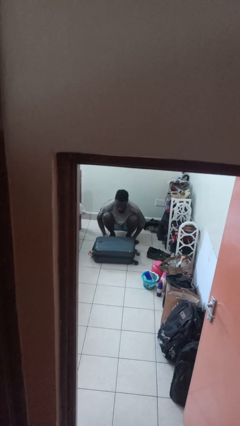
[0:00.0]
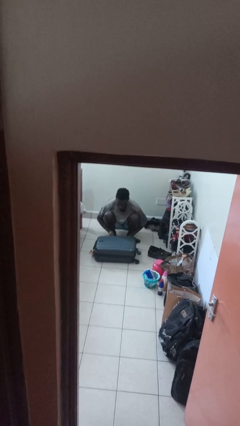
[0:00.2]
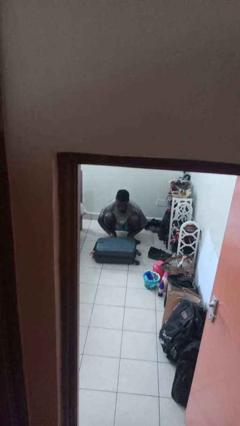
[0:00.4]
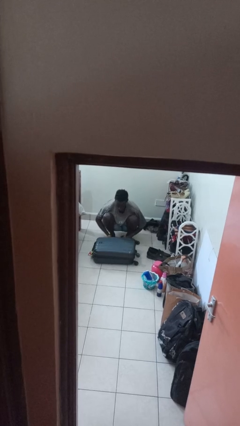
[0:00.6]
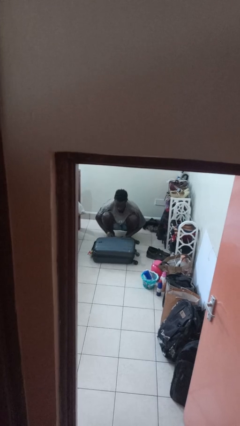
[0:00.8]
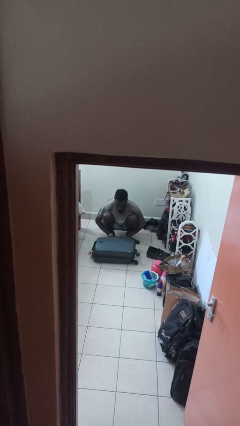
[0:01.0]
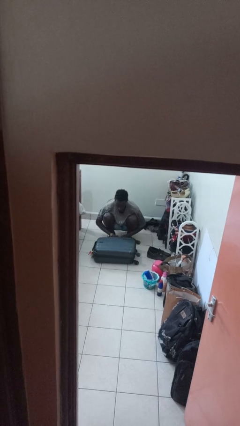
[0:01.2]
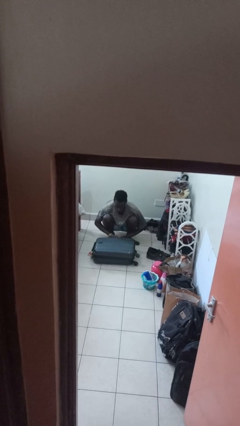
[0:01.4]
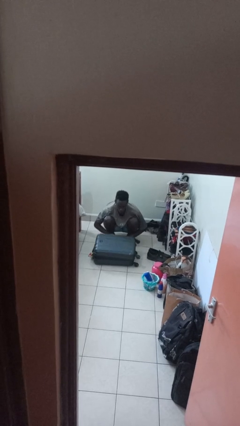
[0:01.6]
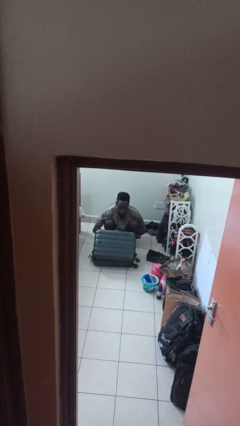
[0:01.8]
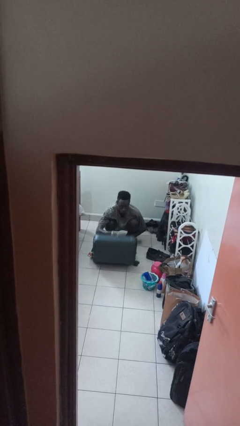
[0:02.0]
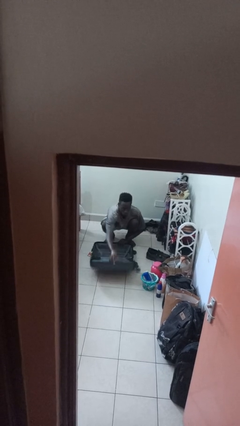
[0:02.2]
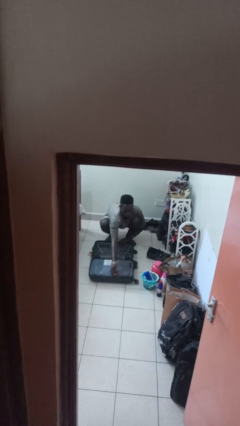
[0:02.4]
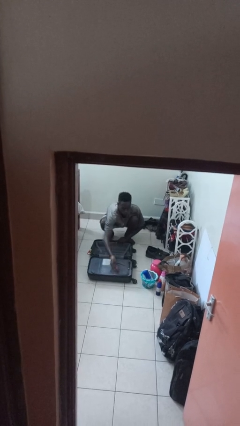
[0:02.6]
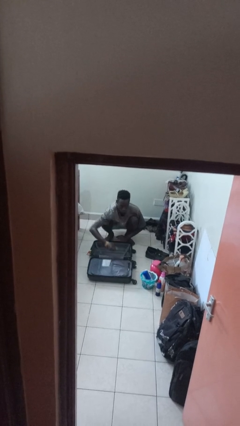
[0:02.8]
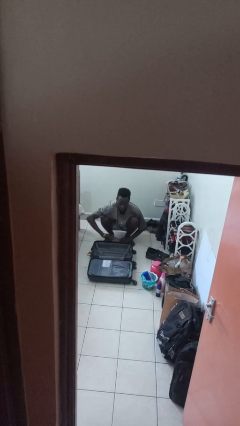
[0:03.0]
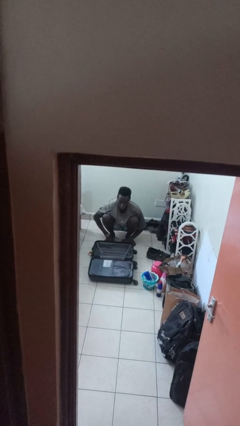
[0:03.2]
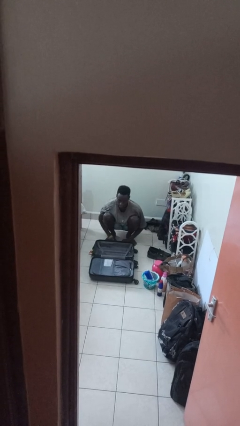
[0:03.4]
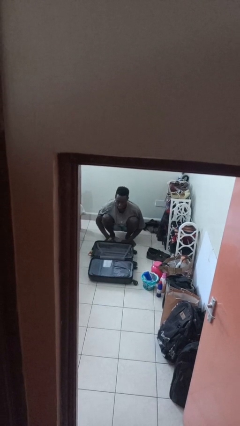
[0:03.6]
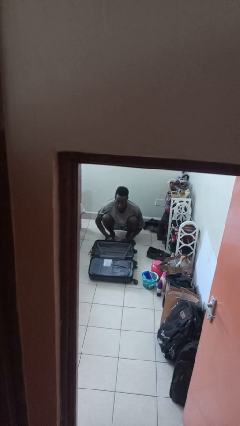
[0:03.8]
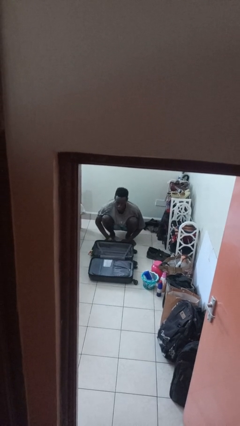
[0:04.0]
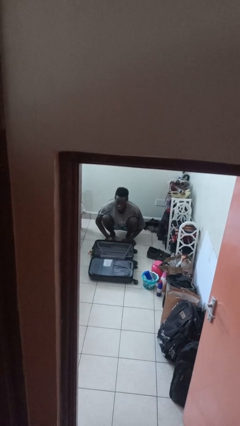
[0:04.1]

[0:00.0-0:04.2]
person opens suitcase

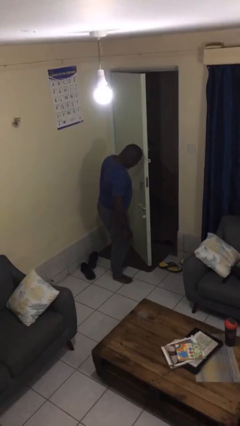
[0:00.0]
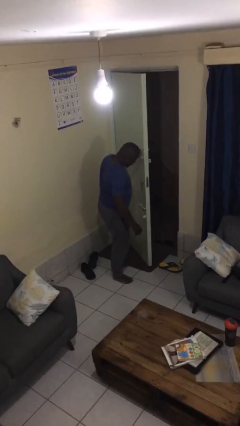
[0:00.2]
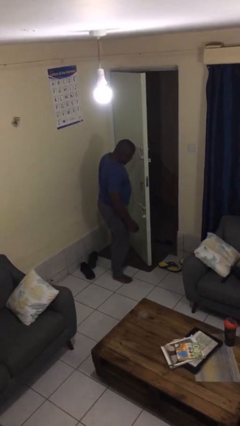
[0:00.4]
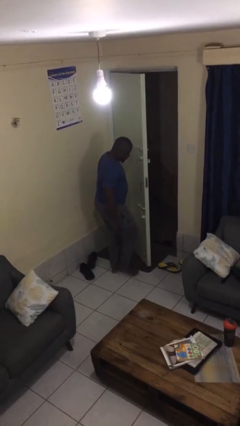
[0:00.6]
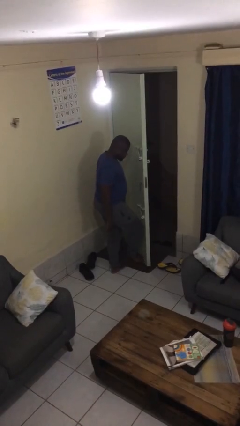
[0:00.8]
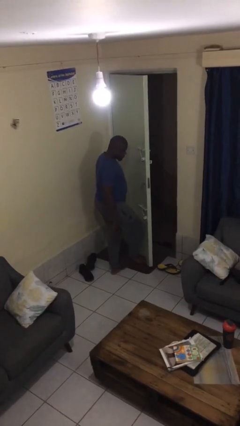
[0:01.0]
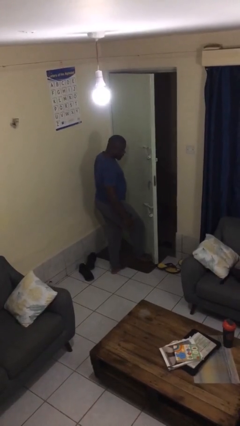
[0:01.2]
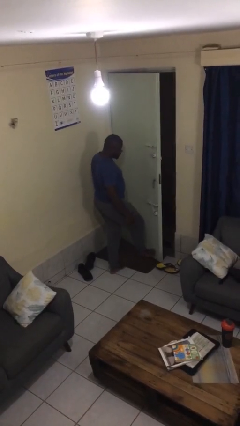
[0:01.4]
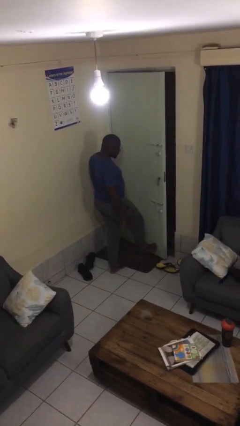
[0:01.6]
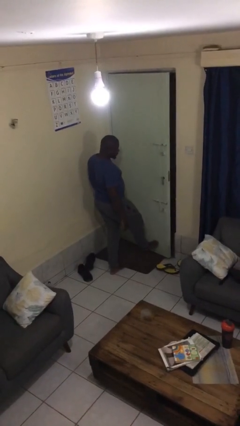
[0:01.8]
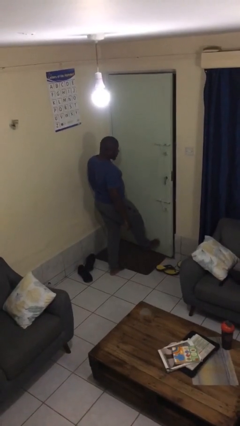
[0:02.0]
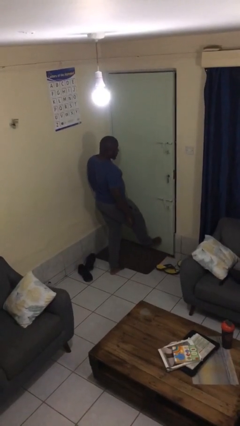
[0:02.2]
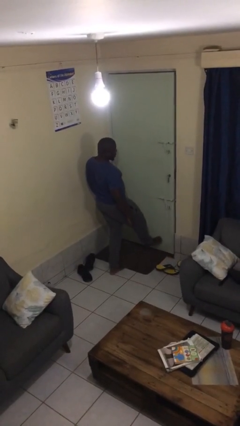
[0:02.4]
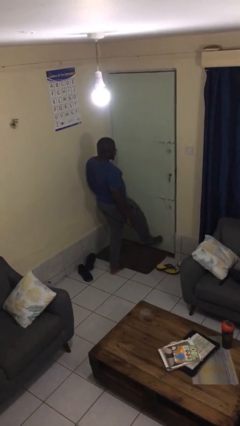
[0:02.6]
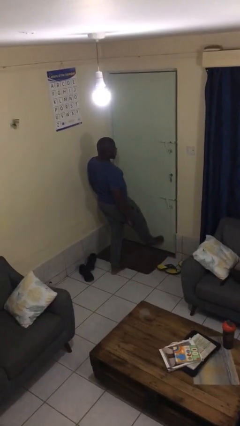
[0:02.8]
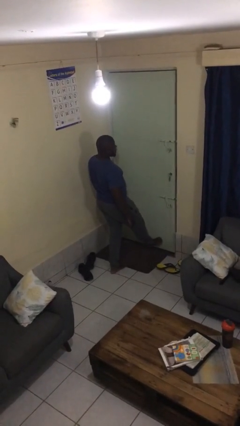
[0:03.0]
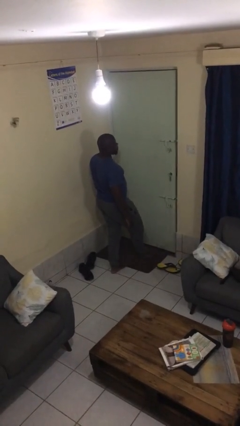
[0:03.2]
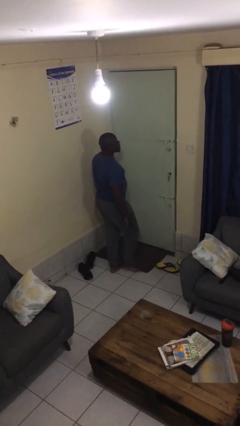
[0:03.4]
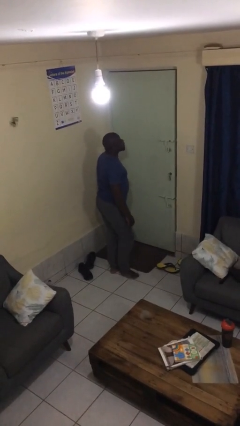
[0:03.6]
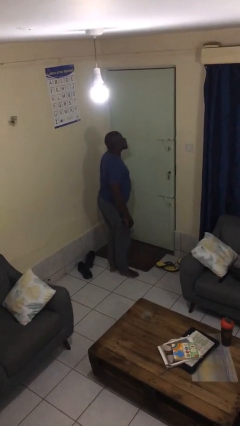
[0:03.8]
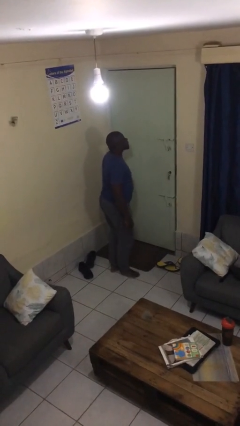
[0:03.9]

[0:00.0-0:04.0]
person closes door with foot

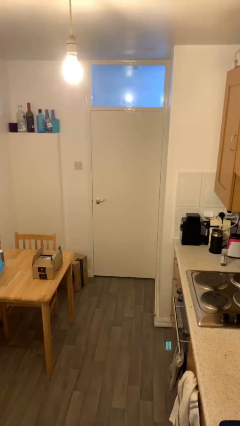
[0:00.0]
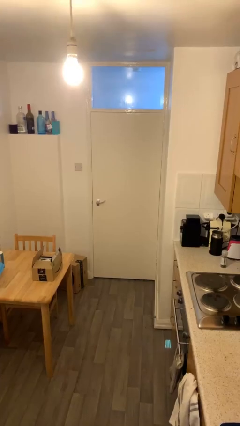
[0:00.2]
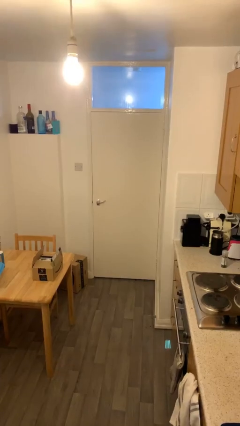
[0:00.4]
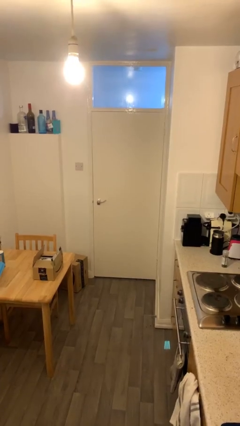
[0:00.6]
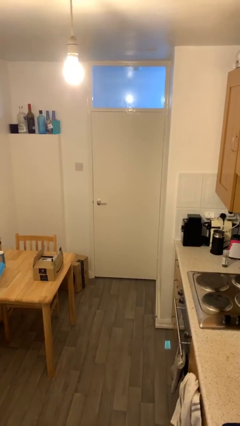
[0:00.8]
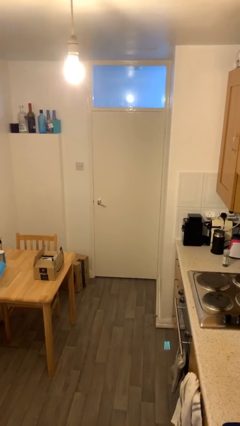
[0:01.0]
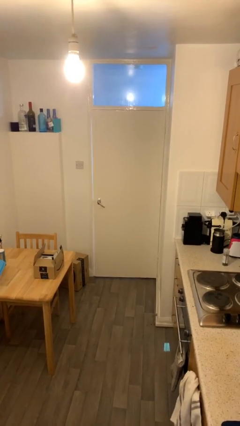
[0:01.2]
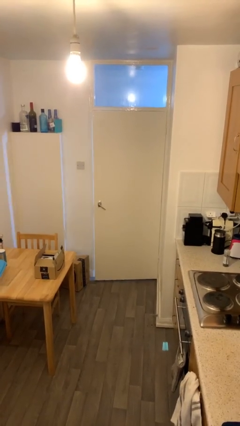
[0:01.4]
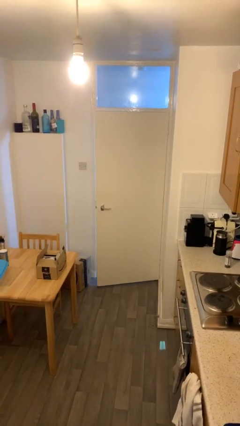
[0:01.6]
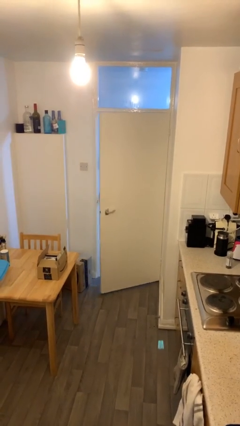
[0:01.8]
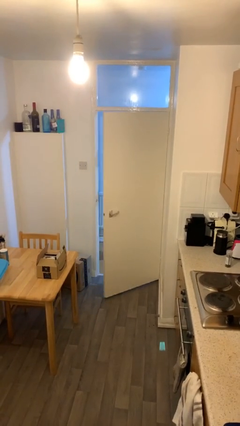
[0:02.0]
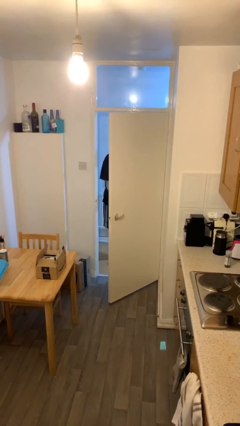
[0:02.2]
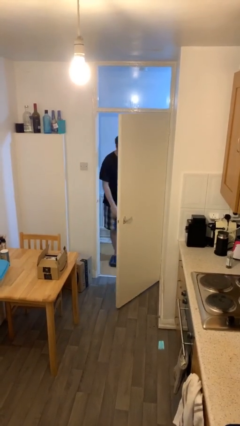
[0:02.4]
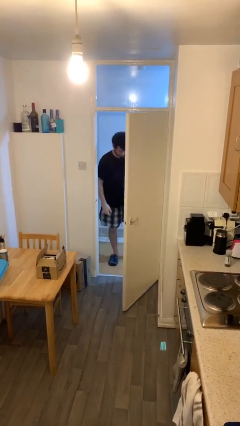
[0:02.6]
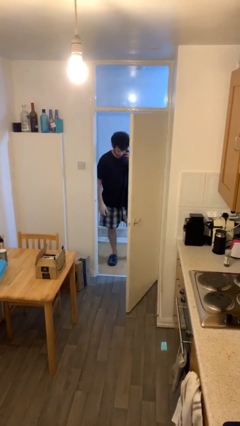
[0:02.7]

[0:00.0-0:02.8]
person opens facility door

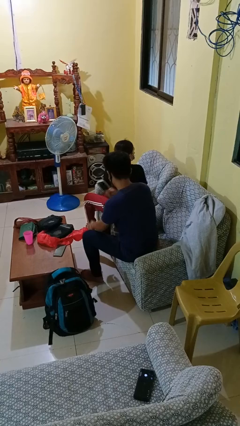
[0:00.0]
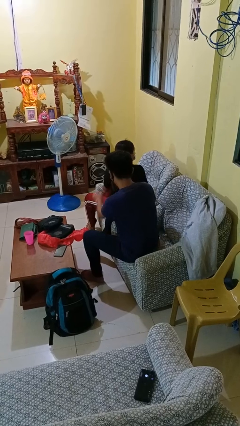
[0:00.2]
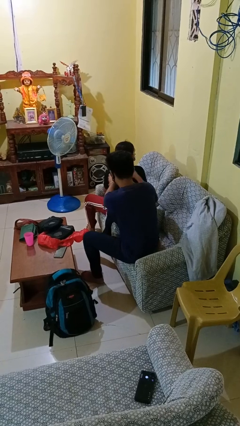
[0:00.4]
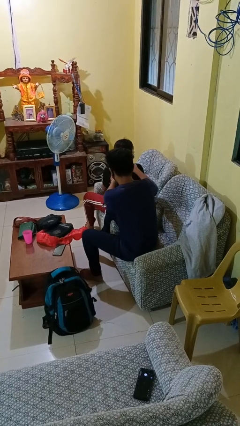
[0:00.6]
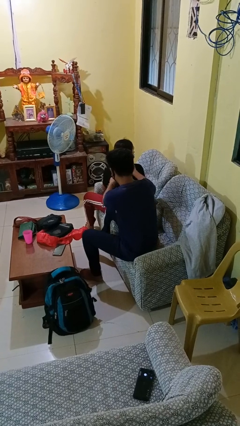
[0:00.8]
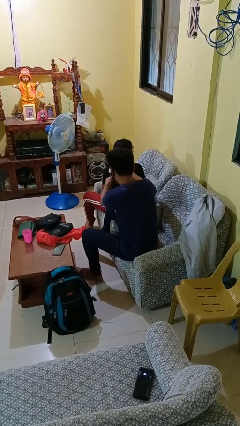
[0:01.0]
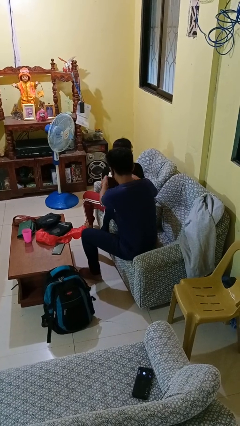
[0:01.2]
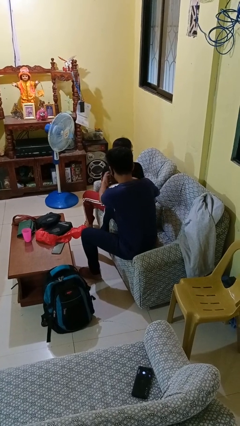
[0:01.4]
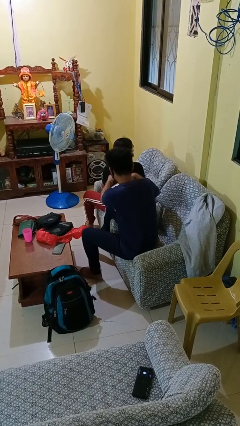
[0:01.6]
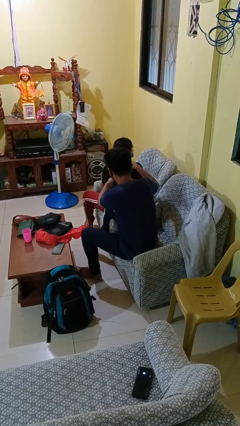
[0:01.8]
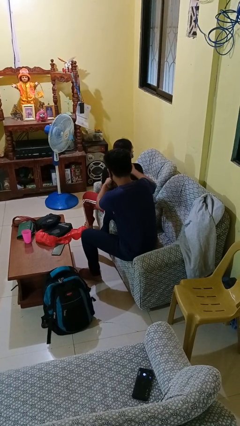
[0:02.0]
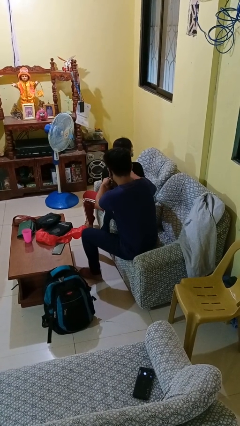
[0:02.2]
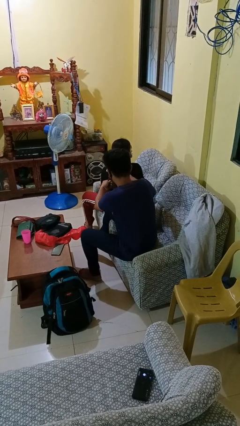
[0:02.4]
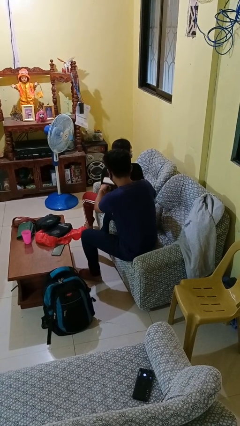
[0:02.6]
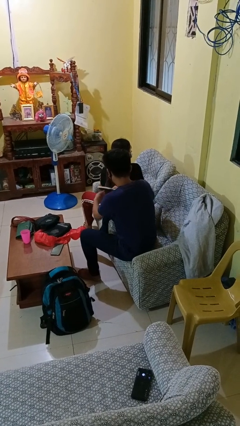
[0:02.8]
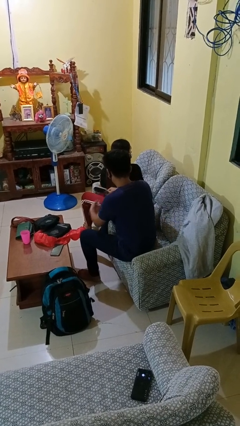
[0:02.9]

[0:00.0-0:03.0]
person brushes hair of person

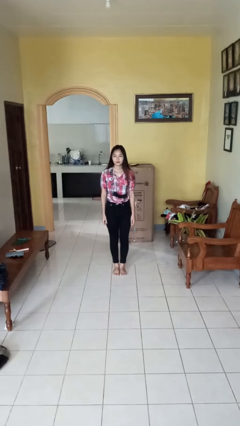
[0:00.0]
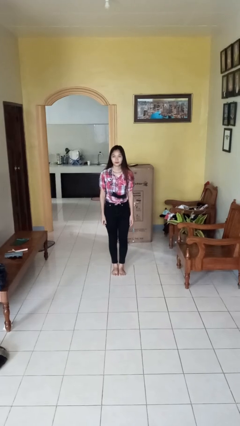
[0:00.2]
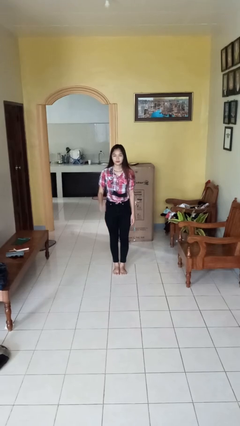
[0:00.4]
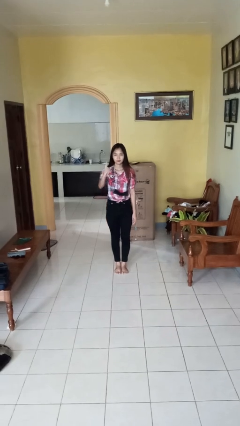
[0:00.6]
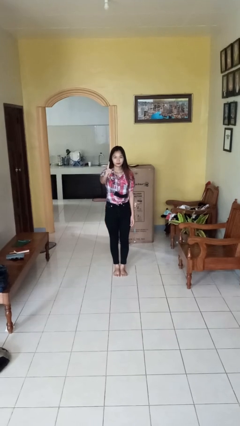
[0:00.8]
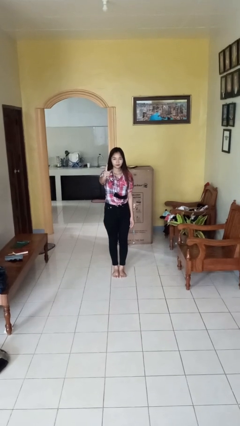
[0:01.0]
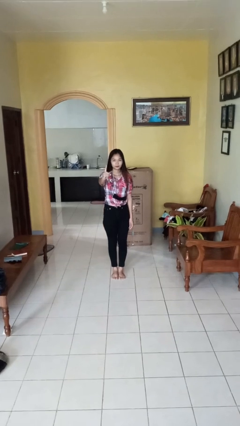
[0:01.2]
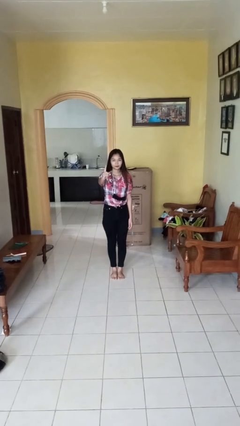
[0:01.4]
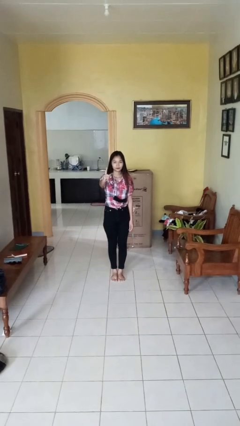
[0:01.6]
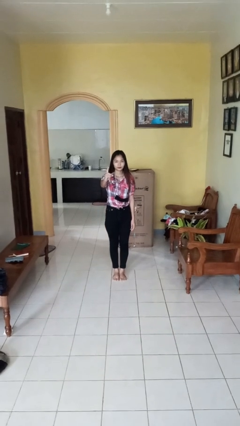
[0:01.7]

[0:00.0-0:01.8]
person gestures number one

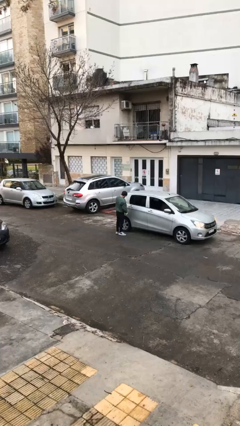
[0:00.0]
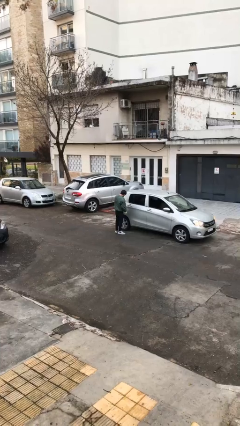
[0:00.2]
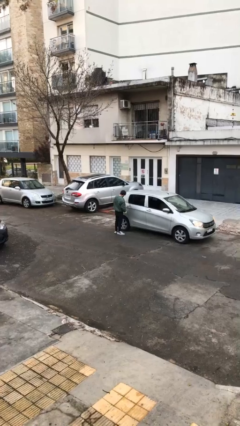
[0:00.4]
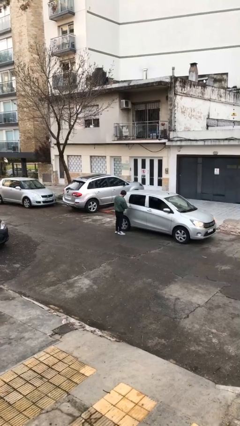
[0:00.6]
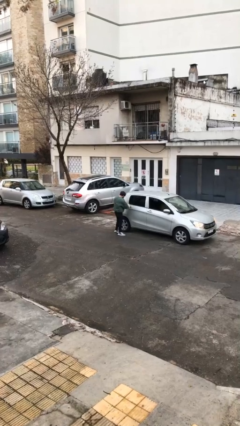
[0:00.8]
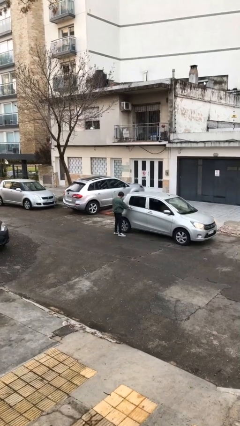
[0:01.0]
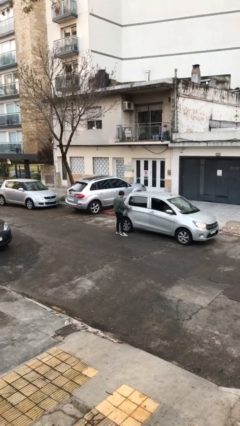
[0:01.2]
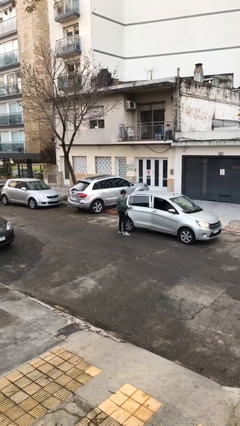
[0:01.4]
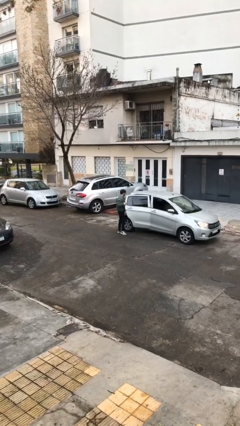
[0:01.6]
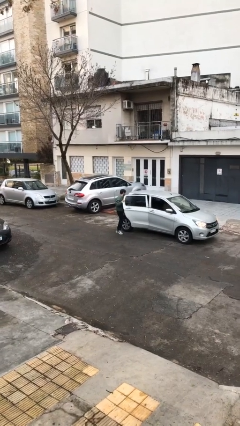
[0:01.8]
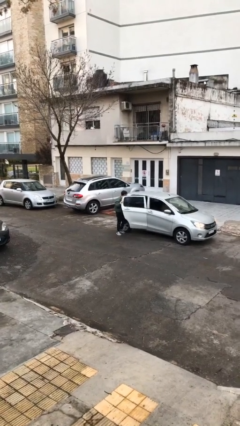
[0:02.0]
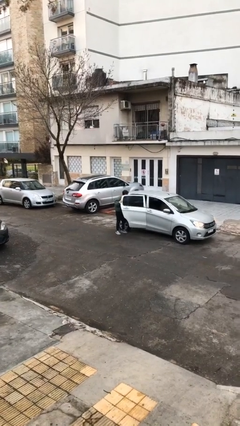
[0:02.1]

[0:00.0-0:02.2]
person opens car door
